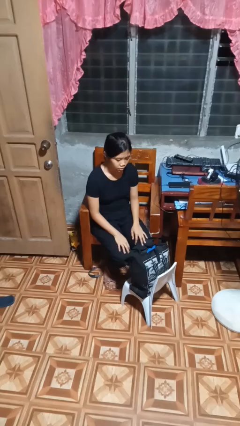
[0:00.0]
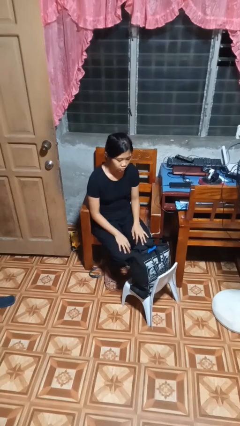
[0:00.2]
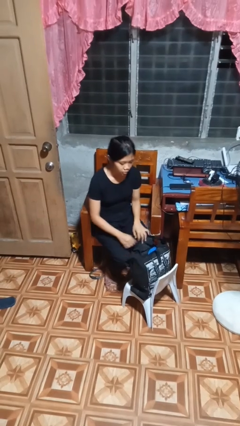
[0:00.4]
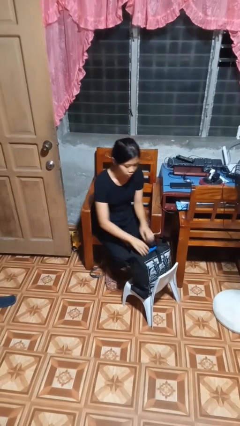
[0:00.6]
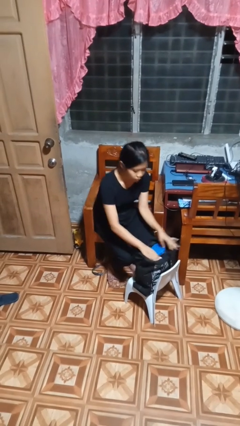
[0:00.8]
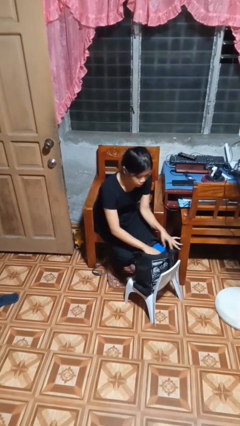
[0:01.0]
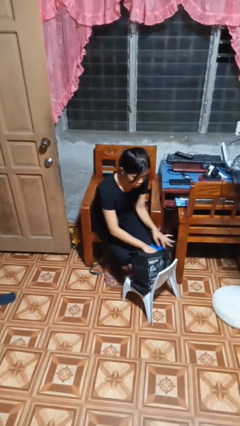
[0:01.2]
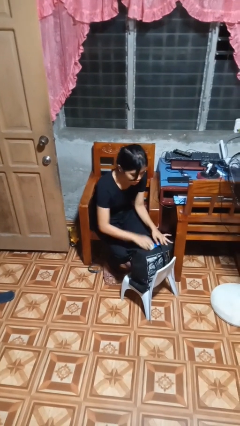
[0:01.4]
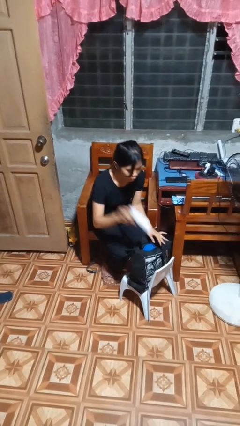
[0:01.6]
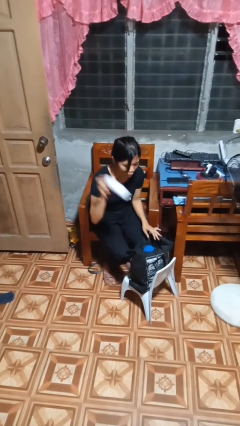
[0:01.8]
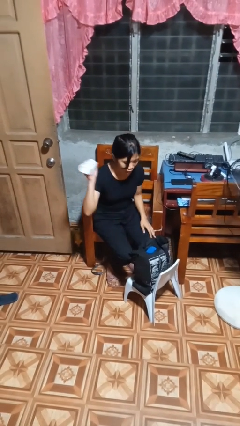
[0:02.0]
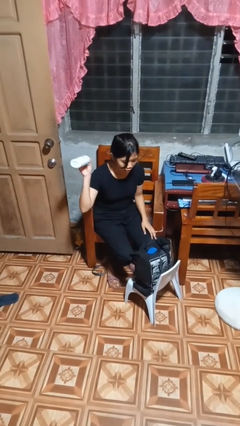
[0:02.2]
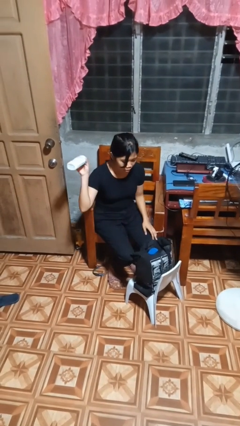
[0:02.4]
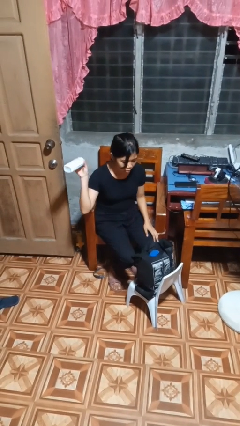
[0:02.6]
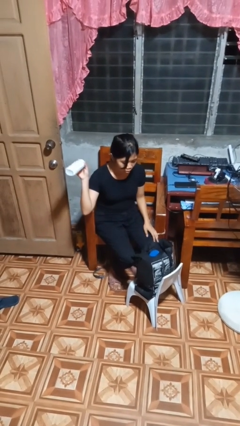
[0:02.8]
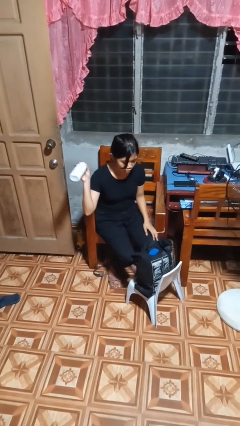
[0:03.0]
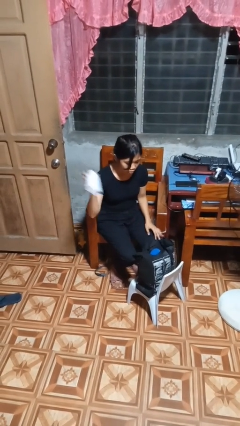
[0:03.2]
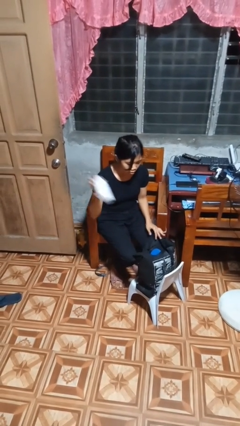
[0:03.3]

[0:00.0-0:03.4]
person searches in bag

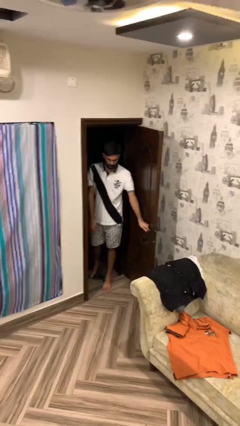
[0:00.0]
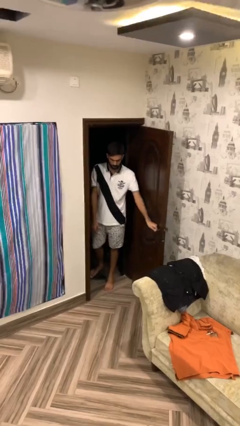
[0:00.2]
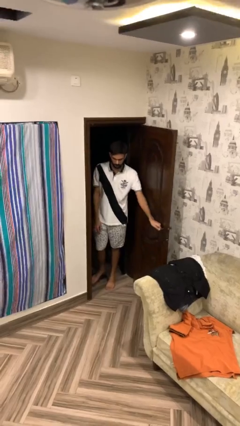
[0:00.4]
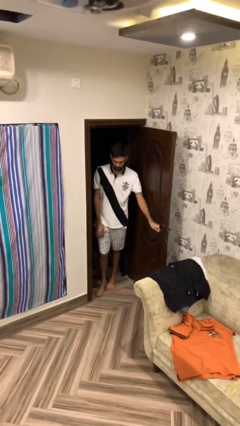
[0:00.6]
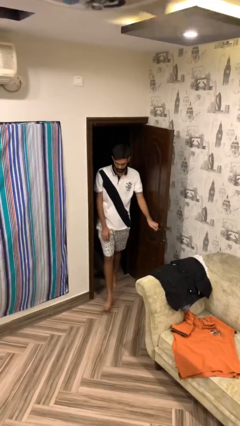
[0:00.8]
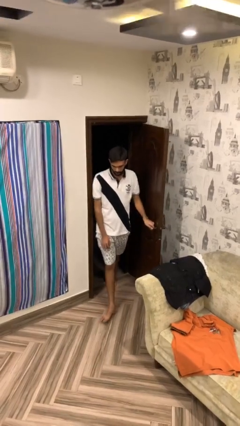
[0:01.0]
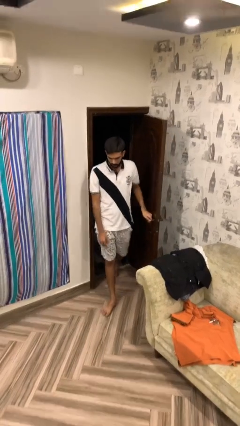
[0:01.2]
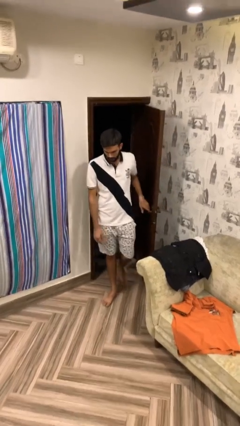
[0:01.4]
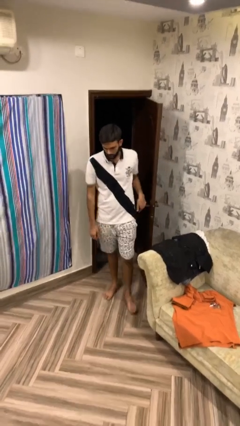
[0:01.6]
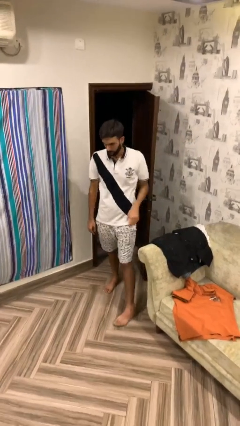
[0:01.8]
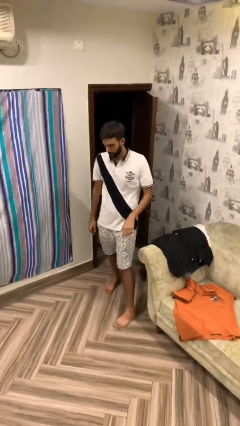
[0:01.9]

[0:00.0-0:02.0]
person enters scene through structure

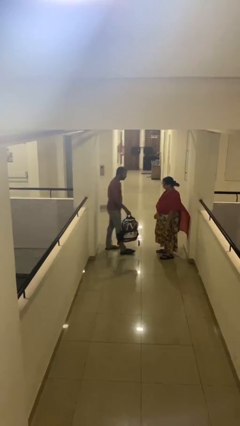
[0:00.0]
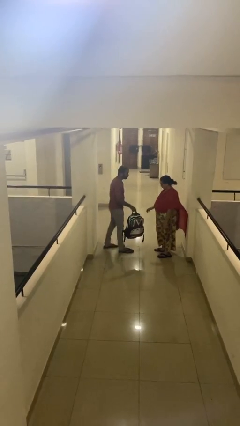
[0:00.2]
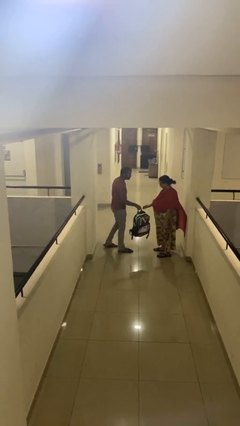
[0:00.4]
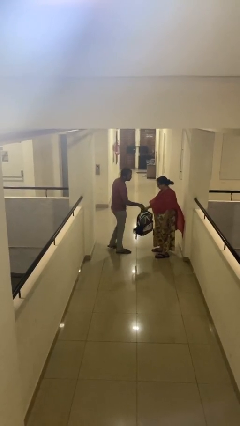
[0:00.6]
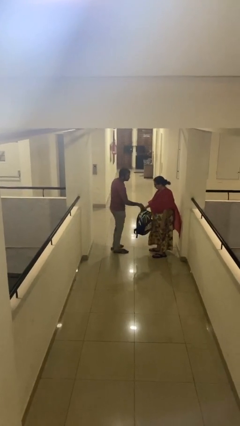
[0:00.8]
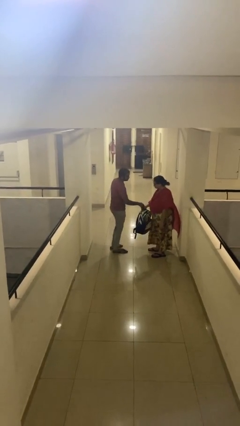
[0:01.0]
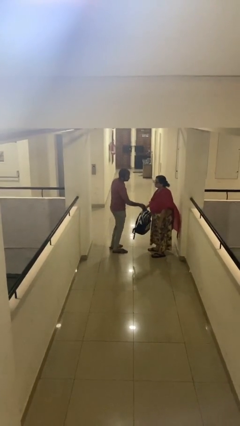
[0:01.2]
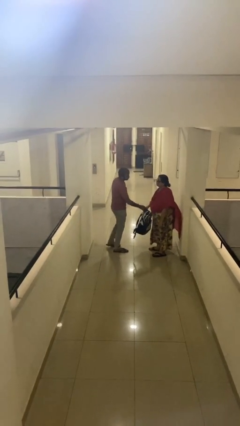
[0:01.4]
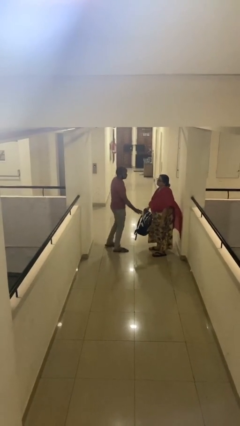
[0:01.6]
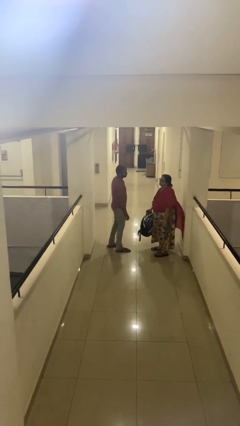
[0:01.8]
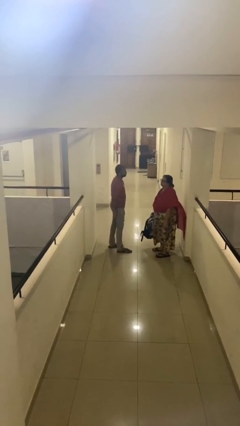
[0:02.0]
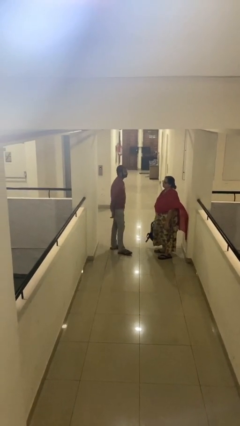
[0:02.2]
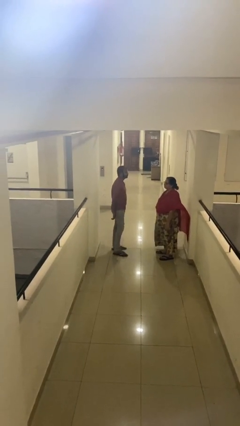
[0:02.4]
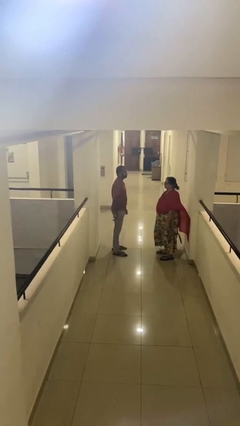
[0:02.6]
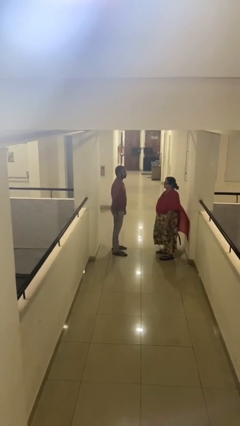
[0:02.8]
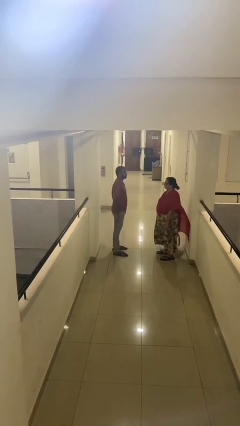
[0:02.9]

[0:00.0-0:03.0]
person transfers object to person

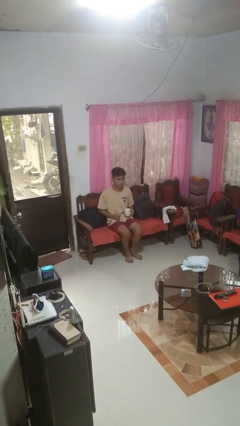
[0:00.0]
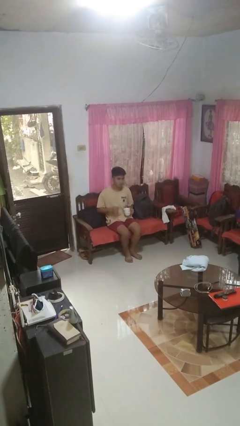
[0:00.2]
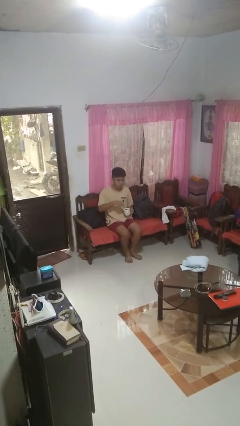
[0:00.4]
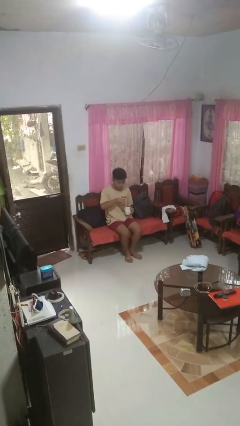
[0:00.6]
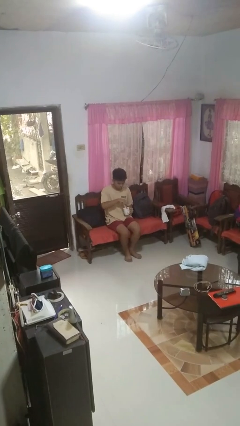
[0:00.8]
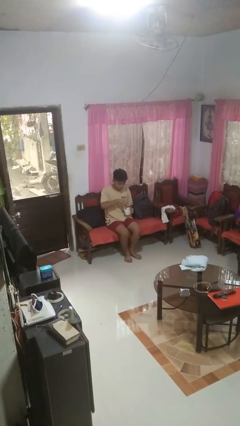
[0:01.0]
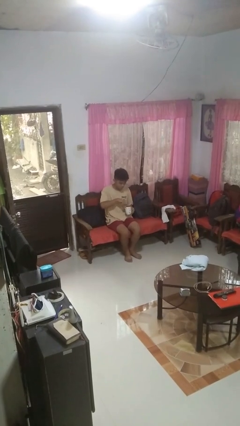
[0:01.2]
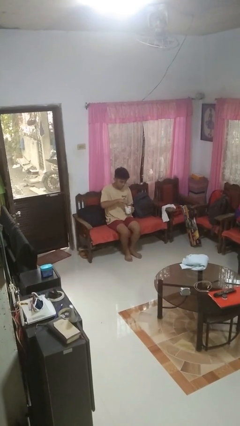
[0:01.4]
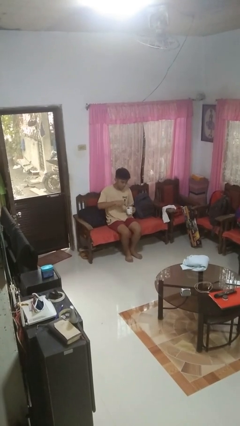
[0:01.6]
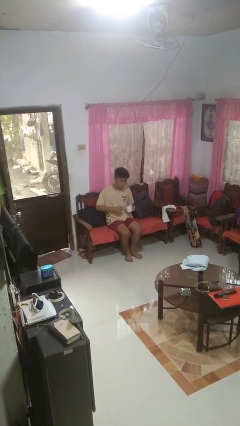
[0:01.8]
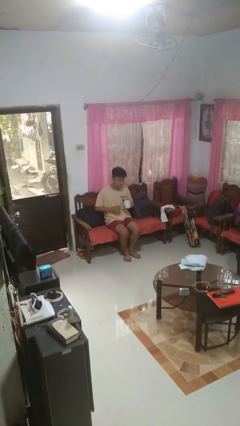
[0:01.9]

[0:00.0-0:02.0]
person stirs mug

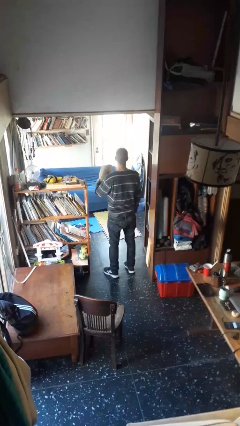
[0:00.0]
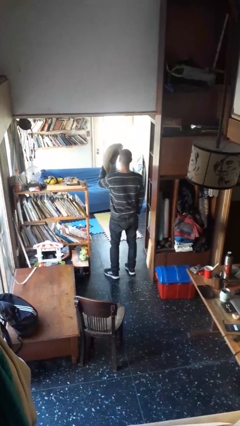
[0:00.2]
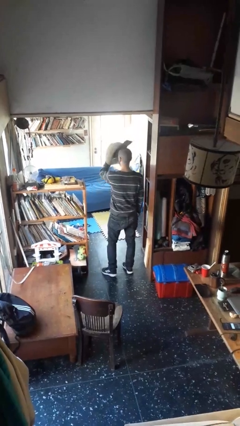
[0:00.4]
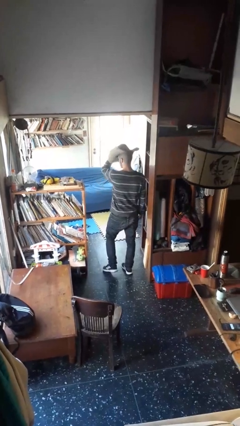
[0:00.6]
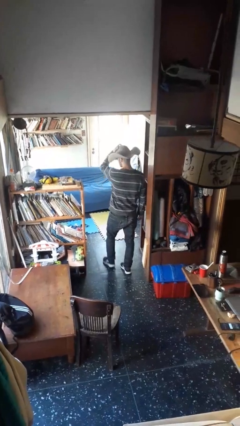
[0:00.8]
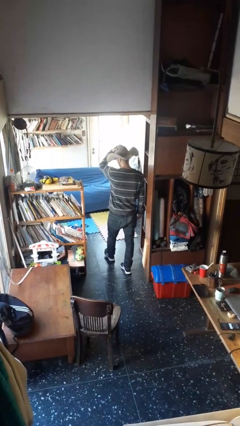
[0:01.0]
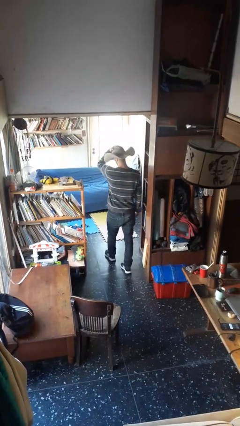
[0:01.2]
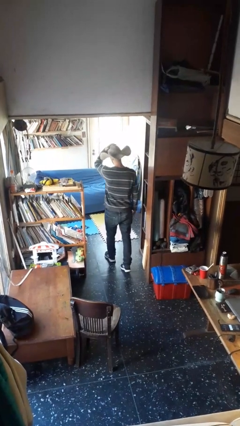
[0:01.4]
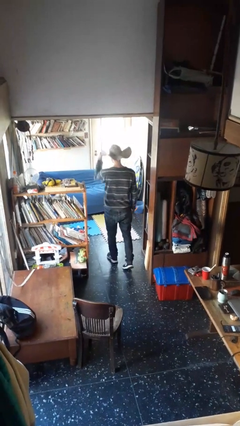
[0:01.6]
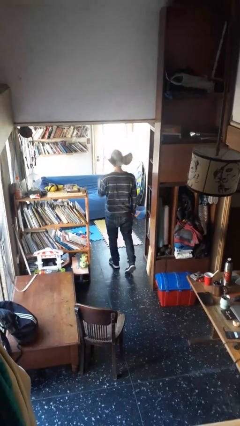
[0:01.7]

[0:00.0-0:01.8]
person puts on hat

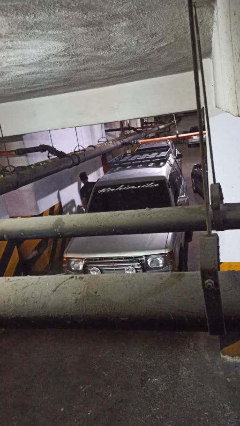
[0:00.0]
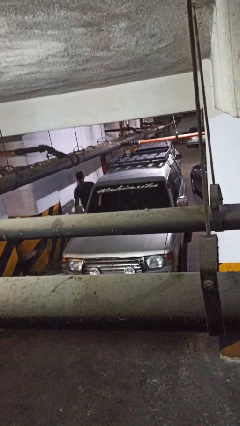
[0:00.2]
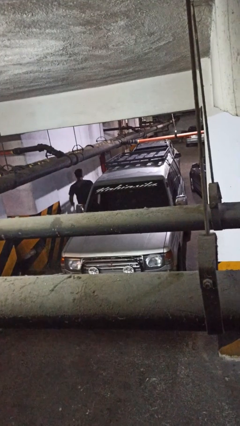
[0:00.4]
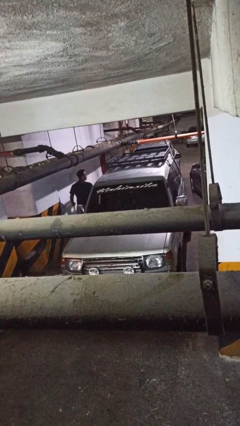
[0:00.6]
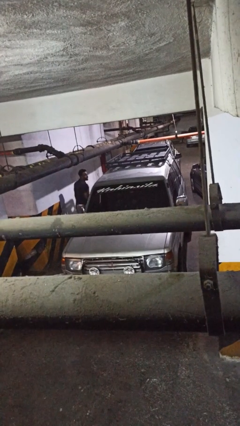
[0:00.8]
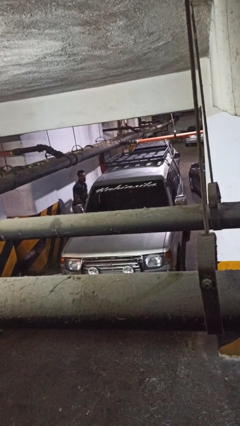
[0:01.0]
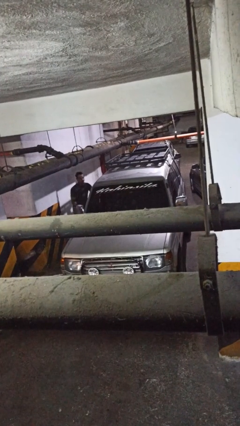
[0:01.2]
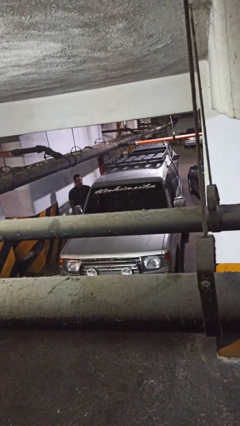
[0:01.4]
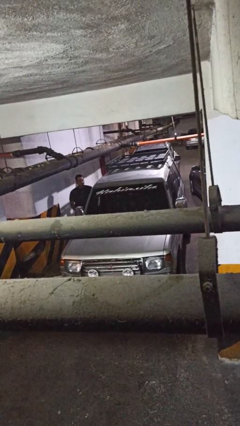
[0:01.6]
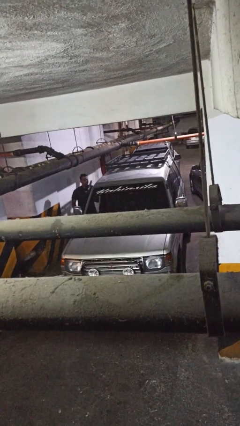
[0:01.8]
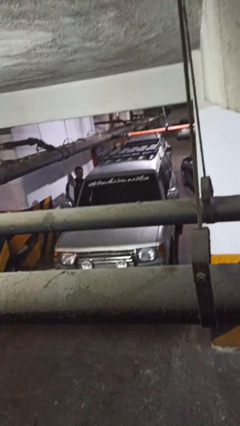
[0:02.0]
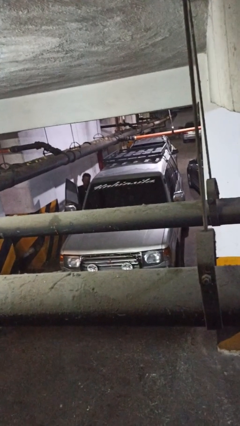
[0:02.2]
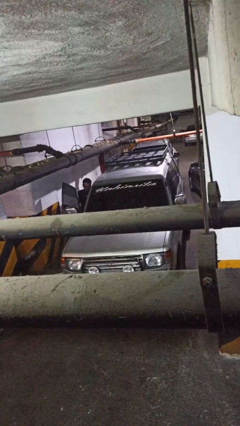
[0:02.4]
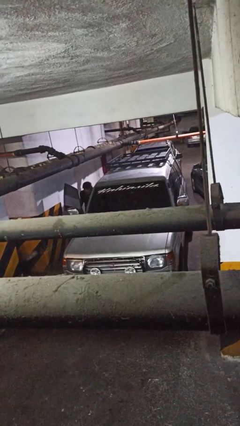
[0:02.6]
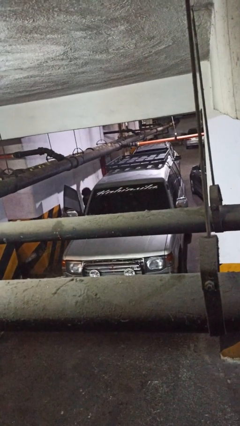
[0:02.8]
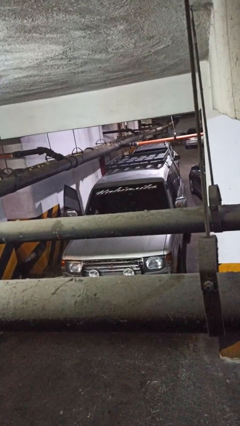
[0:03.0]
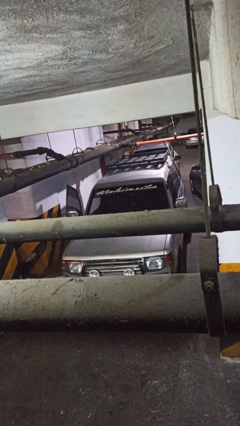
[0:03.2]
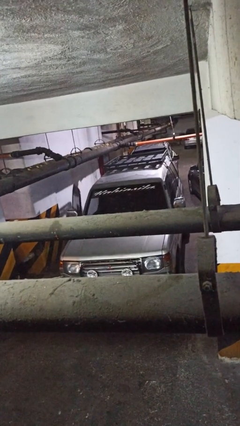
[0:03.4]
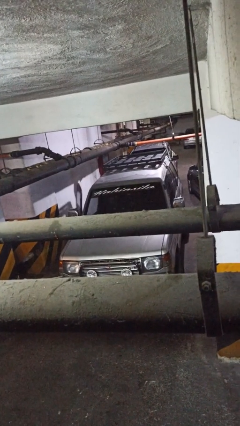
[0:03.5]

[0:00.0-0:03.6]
car picks up person

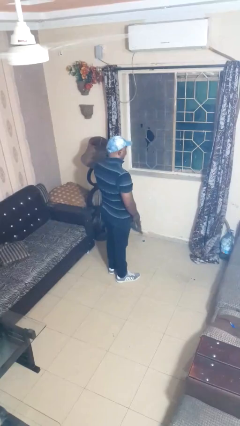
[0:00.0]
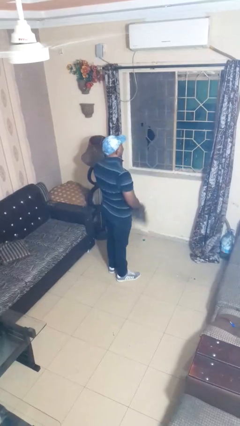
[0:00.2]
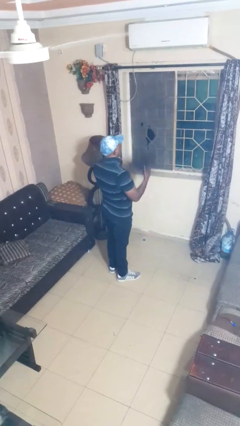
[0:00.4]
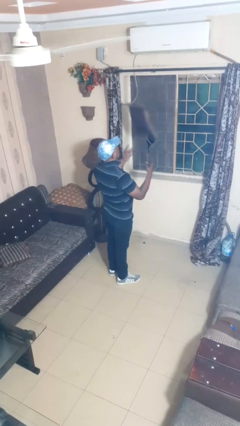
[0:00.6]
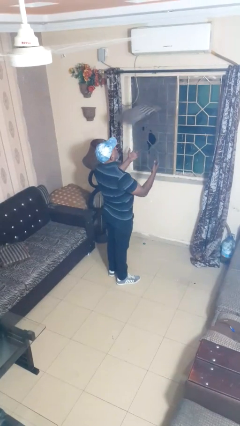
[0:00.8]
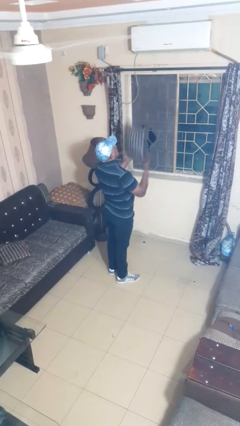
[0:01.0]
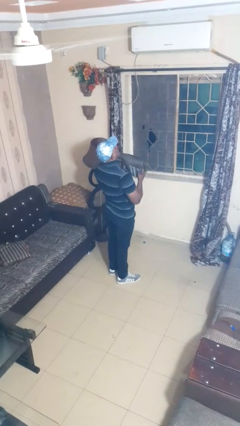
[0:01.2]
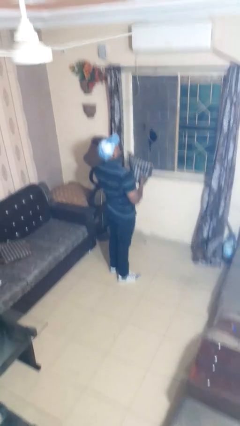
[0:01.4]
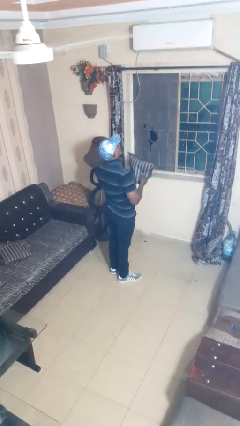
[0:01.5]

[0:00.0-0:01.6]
person drops object
